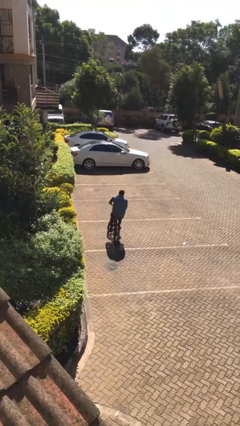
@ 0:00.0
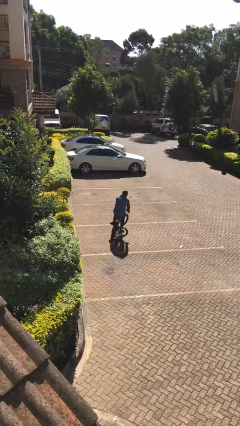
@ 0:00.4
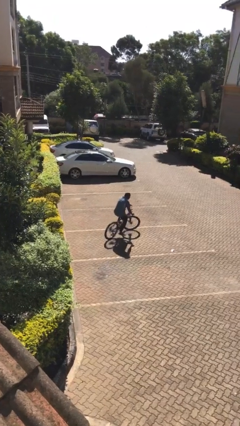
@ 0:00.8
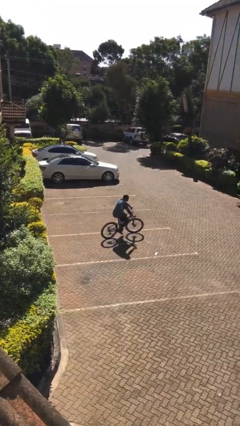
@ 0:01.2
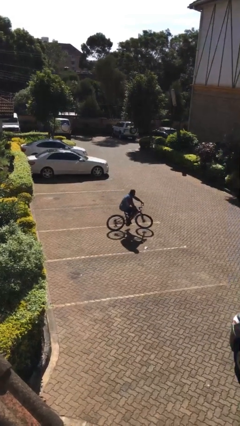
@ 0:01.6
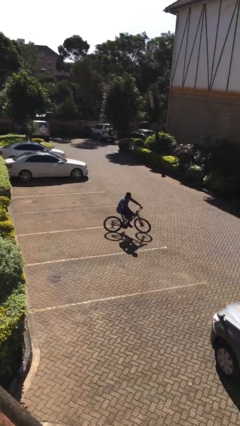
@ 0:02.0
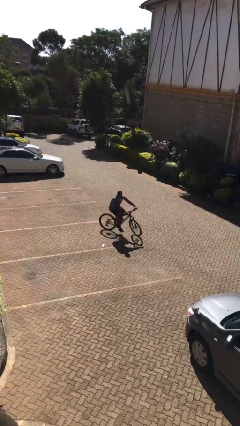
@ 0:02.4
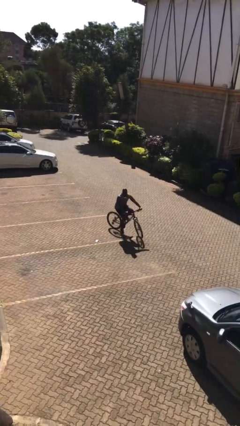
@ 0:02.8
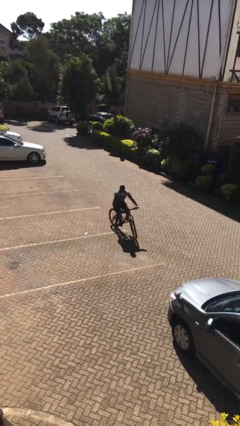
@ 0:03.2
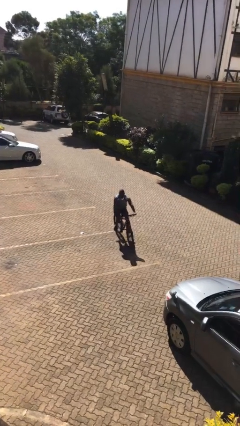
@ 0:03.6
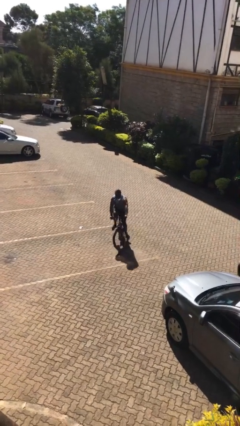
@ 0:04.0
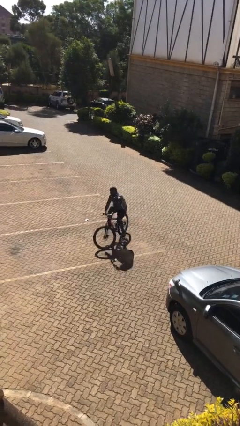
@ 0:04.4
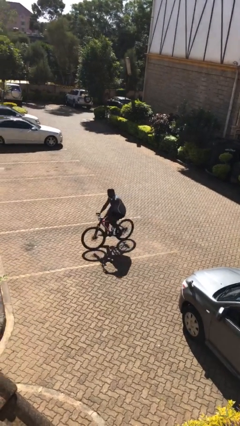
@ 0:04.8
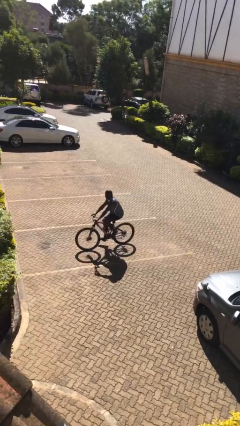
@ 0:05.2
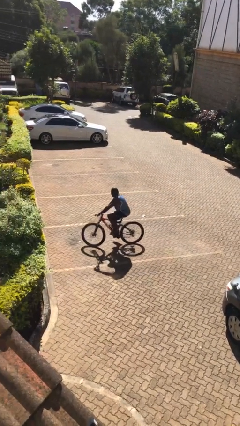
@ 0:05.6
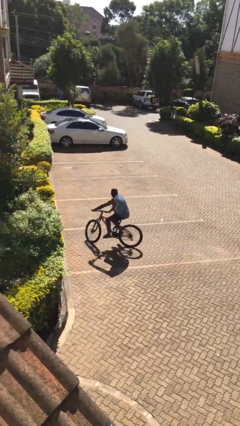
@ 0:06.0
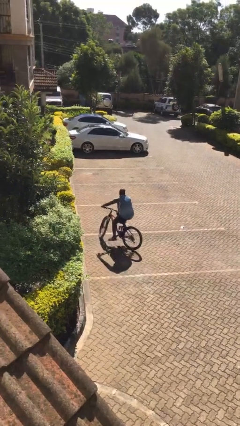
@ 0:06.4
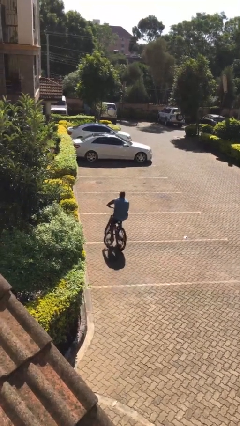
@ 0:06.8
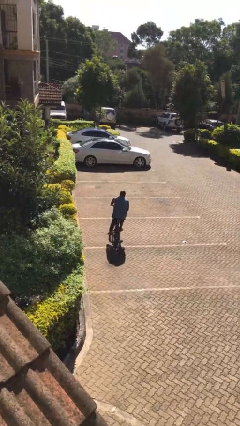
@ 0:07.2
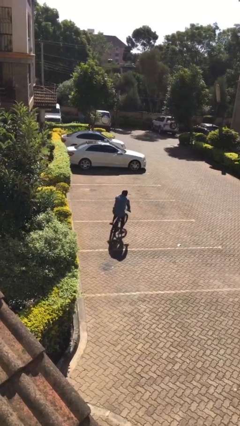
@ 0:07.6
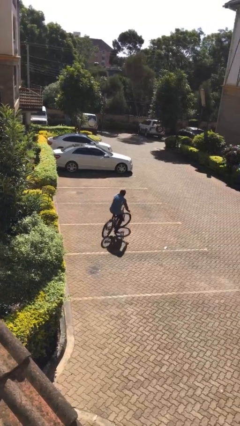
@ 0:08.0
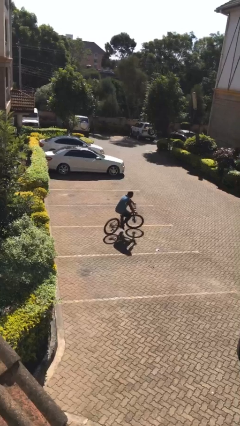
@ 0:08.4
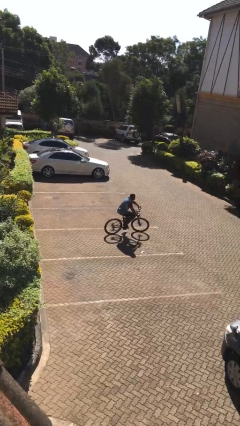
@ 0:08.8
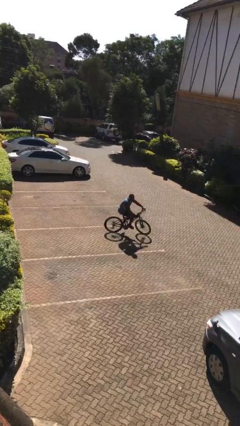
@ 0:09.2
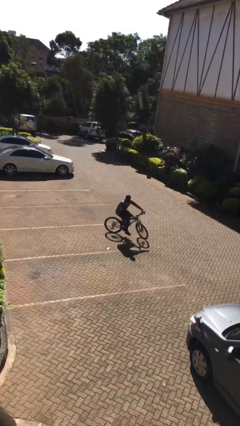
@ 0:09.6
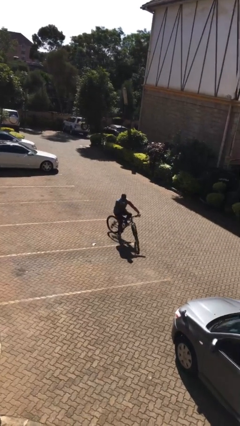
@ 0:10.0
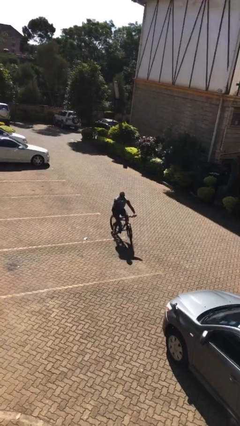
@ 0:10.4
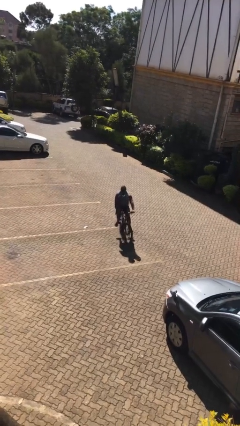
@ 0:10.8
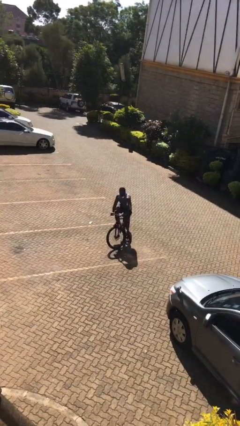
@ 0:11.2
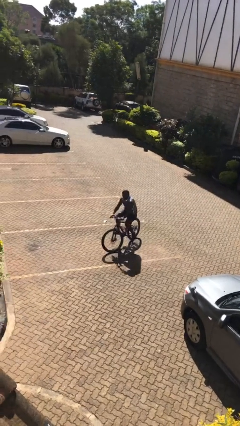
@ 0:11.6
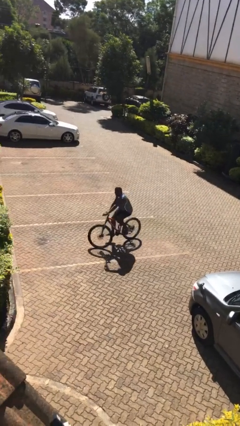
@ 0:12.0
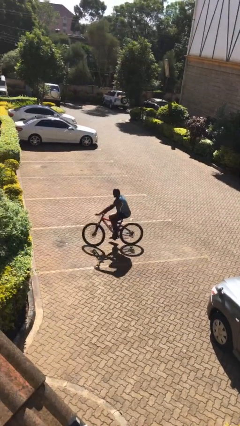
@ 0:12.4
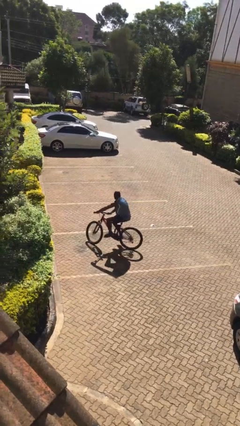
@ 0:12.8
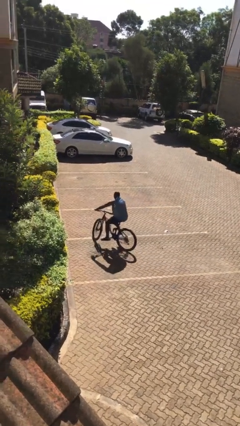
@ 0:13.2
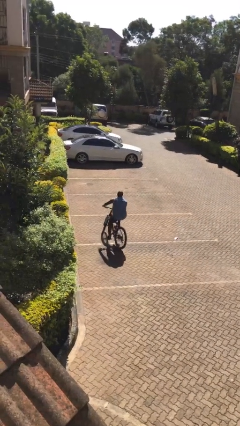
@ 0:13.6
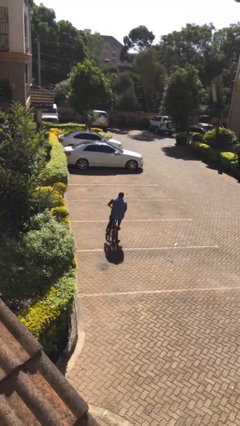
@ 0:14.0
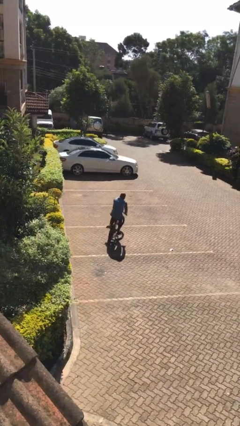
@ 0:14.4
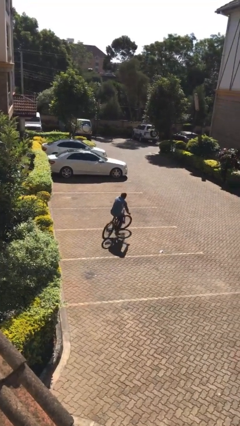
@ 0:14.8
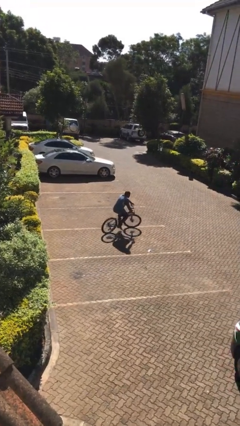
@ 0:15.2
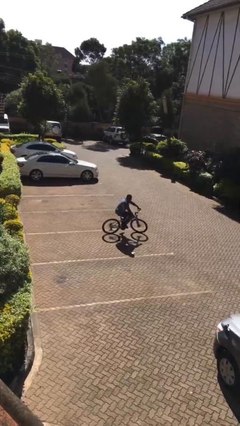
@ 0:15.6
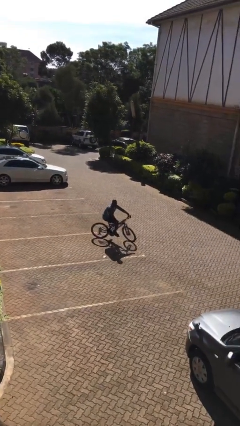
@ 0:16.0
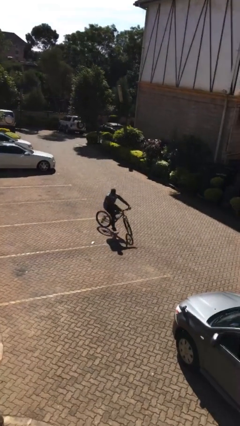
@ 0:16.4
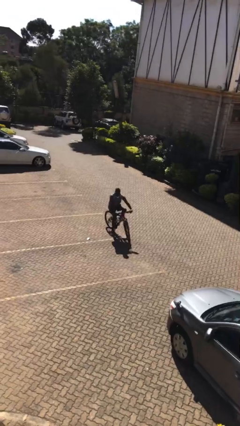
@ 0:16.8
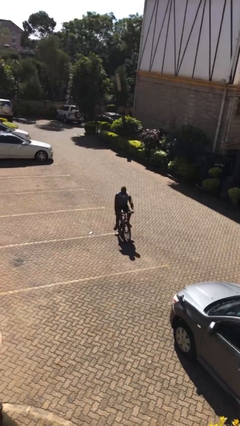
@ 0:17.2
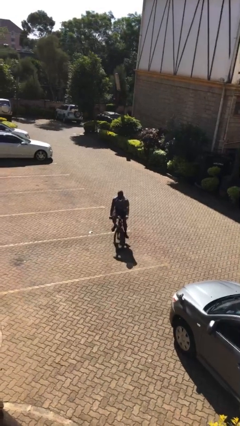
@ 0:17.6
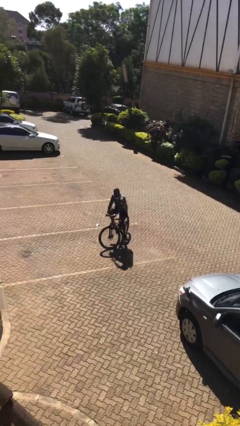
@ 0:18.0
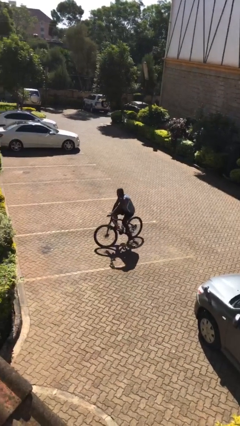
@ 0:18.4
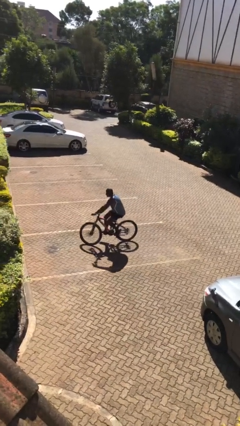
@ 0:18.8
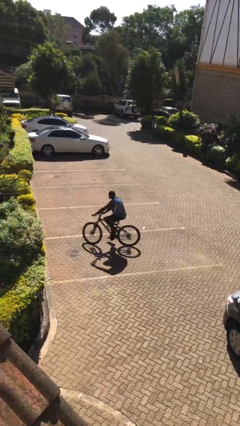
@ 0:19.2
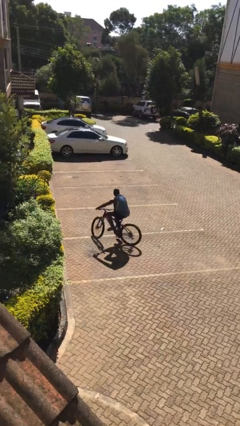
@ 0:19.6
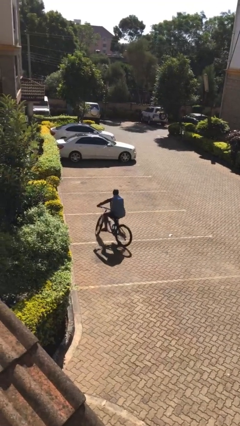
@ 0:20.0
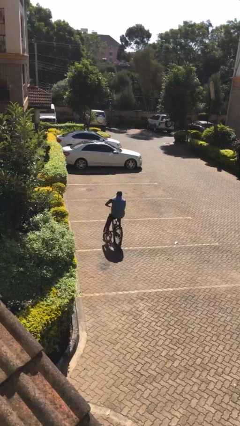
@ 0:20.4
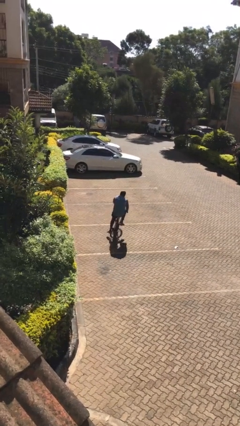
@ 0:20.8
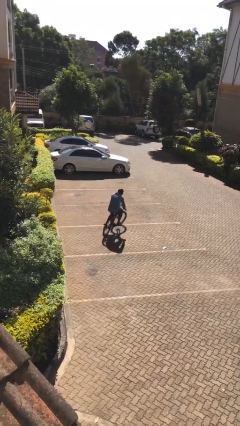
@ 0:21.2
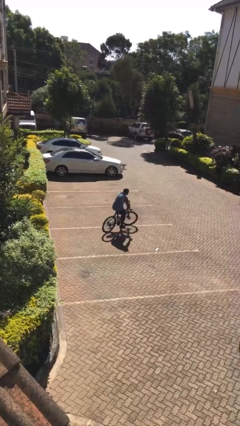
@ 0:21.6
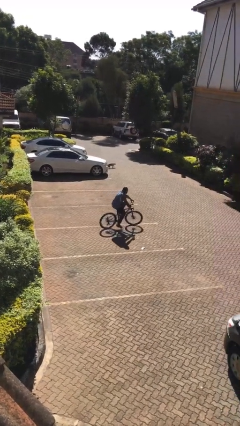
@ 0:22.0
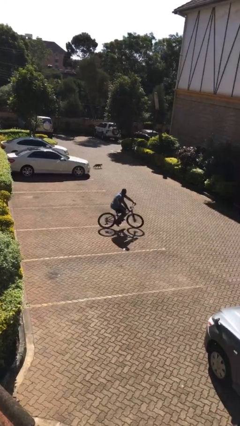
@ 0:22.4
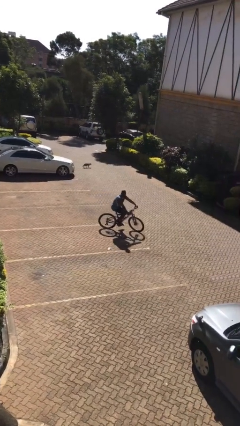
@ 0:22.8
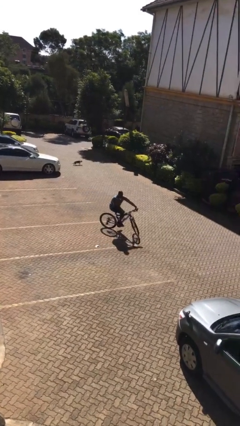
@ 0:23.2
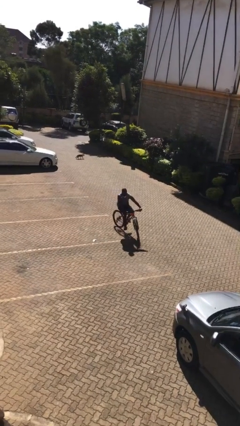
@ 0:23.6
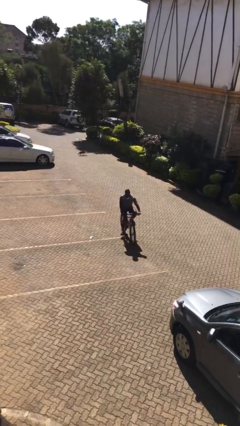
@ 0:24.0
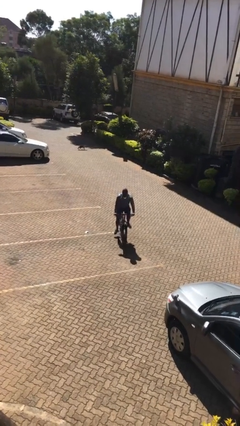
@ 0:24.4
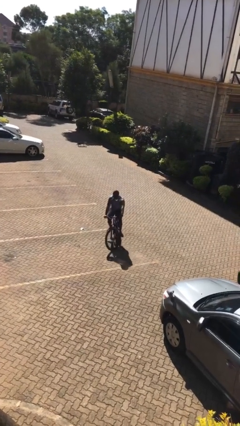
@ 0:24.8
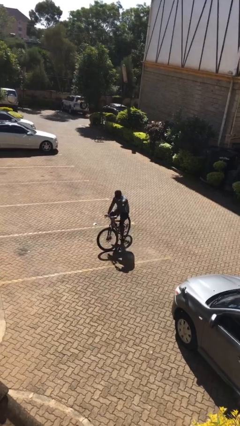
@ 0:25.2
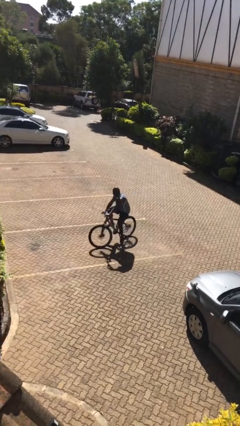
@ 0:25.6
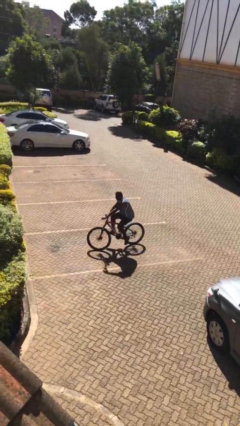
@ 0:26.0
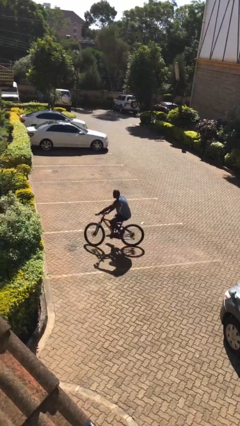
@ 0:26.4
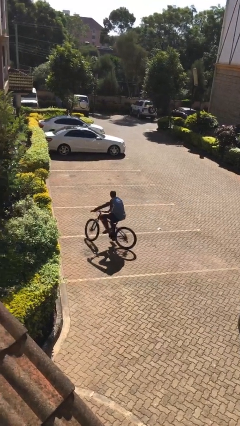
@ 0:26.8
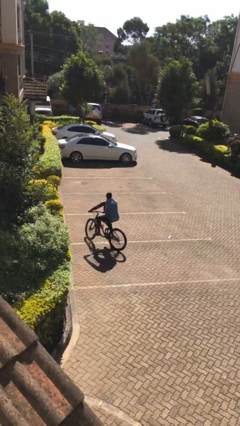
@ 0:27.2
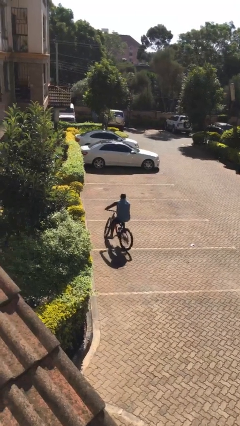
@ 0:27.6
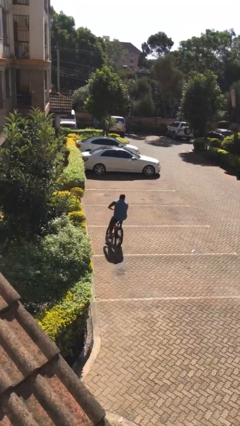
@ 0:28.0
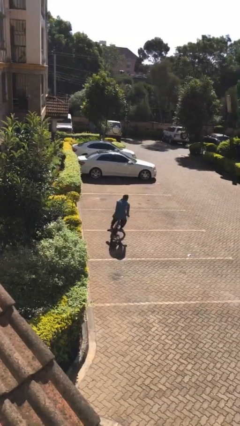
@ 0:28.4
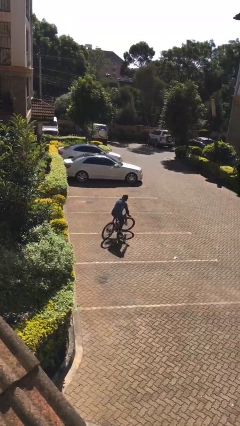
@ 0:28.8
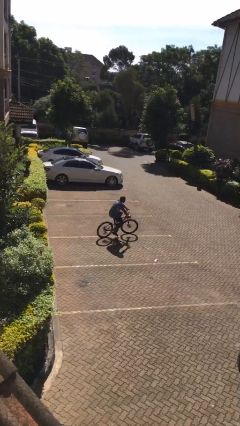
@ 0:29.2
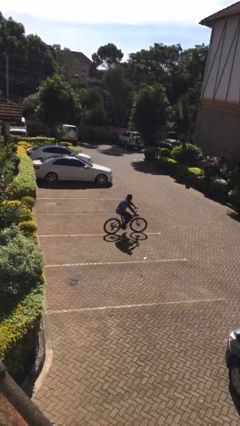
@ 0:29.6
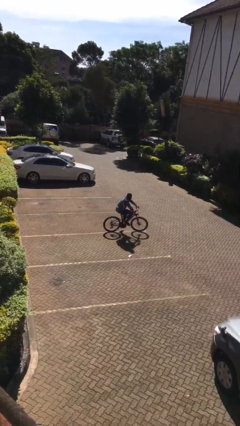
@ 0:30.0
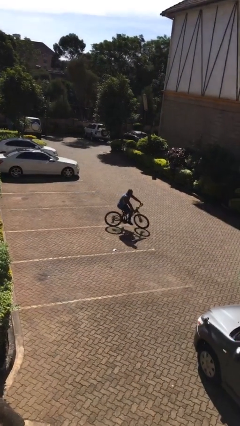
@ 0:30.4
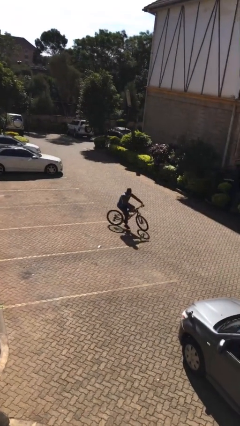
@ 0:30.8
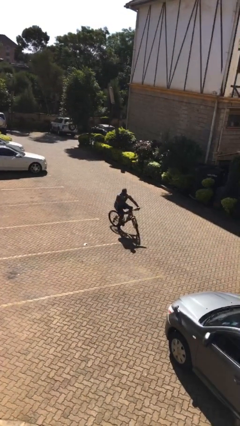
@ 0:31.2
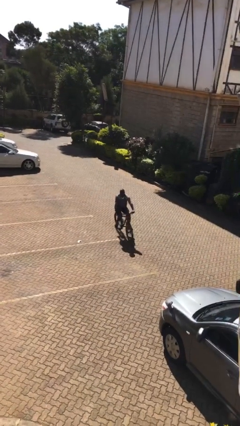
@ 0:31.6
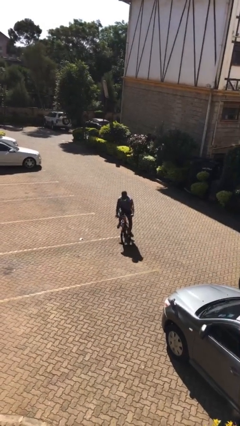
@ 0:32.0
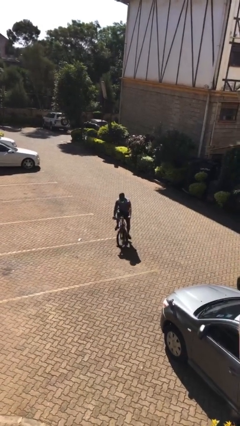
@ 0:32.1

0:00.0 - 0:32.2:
person rides bicycle

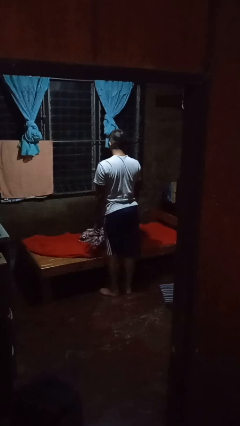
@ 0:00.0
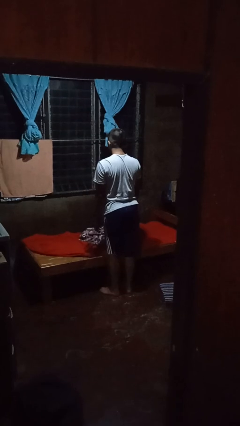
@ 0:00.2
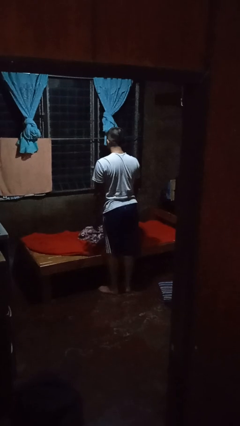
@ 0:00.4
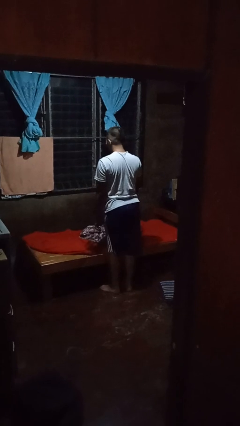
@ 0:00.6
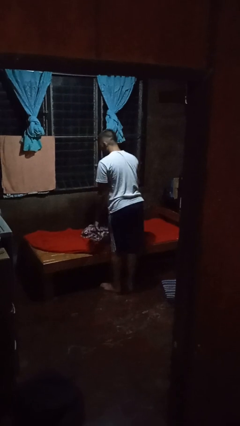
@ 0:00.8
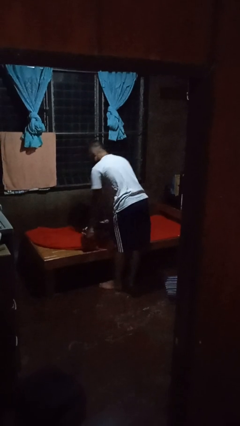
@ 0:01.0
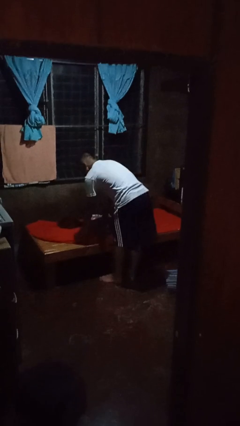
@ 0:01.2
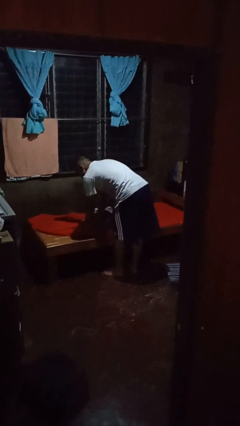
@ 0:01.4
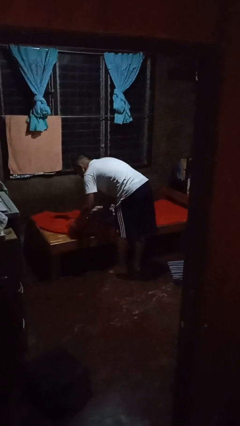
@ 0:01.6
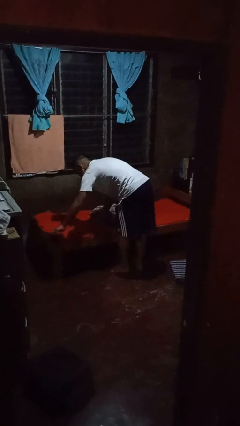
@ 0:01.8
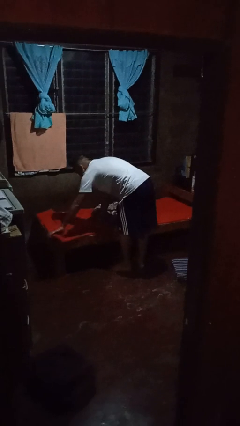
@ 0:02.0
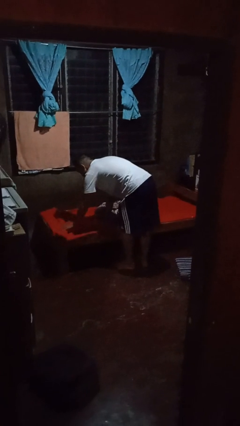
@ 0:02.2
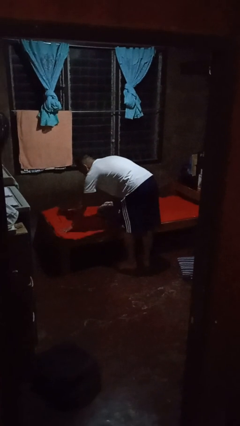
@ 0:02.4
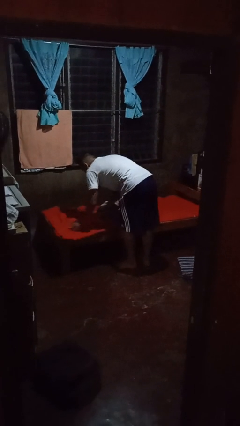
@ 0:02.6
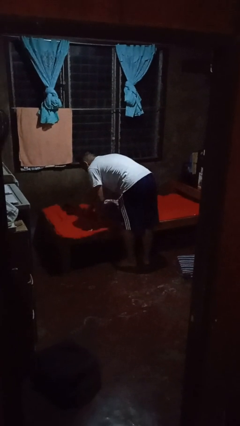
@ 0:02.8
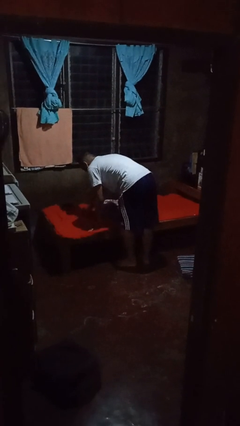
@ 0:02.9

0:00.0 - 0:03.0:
person makes bed
